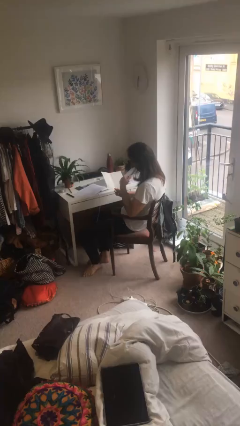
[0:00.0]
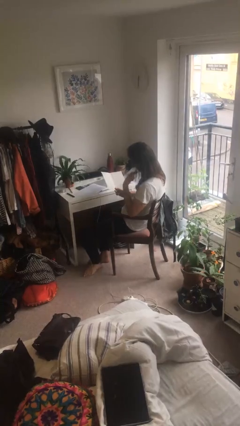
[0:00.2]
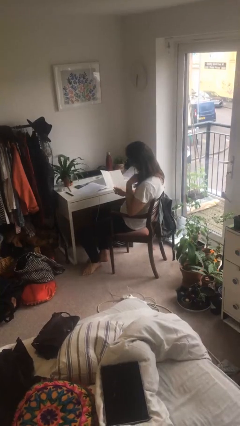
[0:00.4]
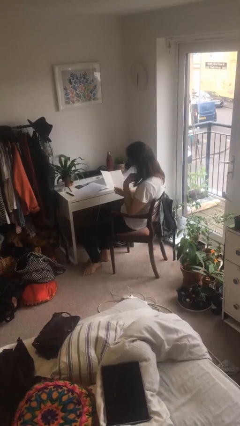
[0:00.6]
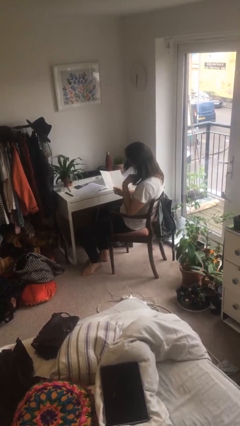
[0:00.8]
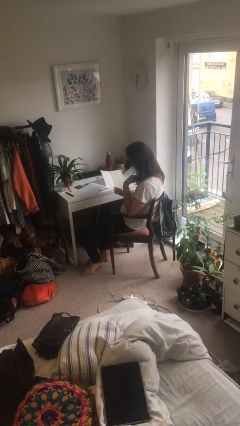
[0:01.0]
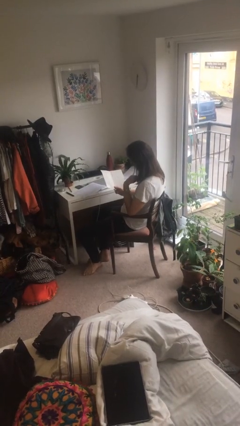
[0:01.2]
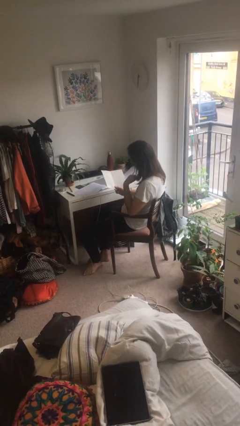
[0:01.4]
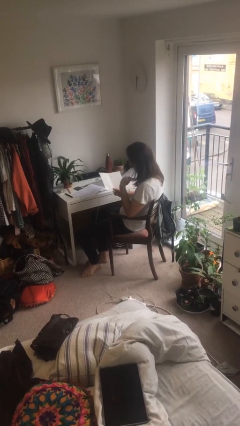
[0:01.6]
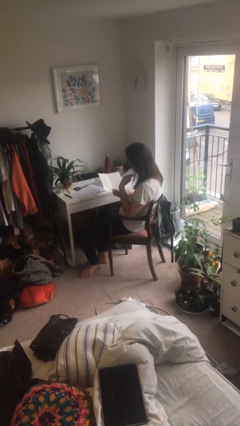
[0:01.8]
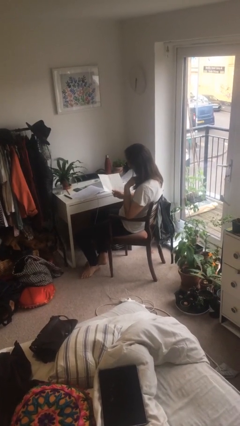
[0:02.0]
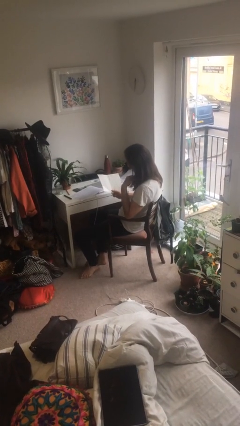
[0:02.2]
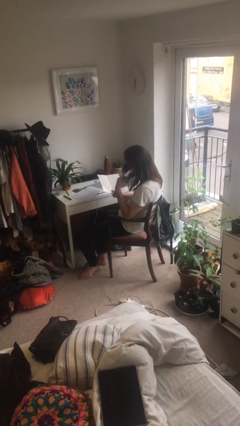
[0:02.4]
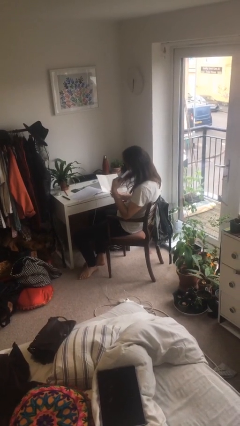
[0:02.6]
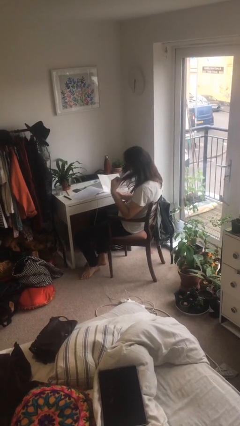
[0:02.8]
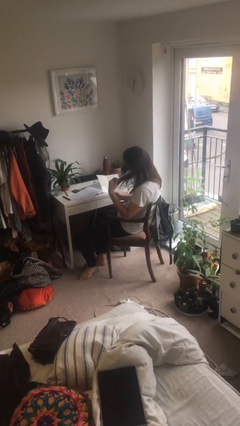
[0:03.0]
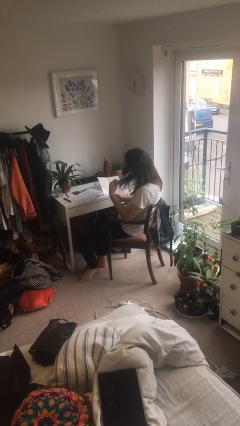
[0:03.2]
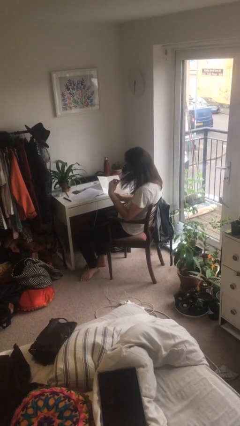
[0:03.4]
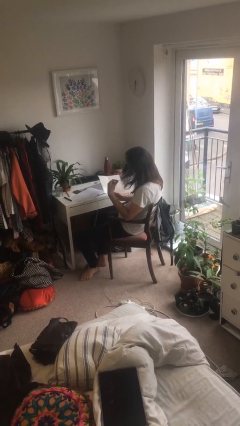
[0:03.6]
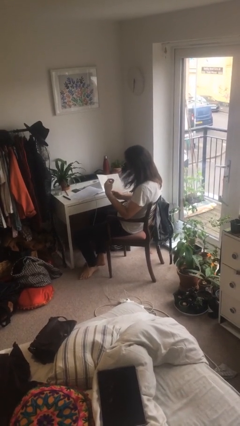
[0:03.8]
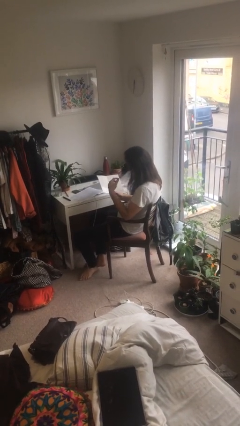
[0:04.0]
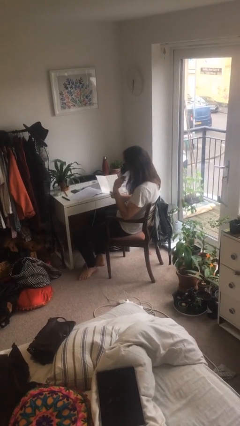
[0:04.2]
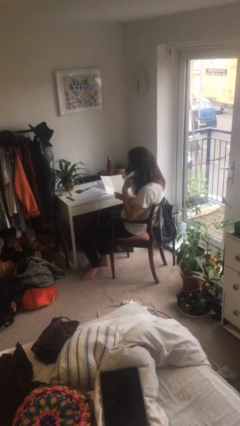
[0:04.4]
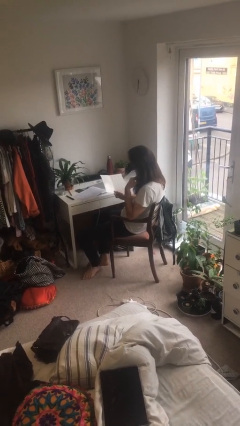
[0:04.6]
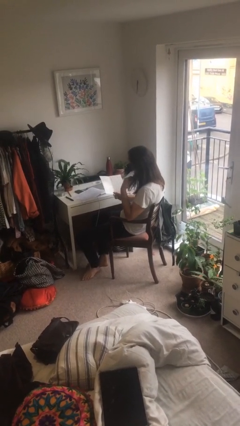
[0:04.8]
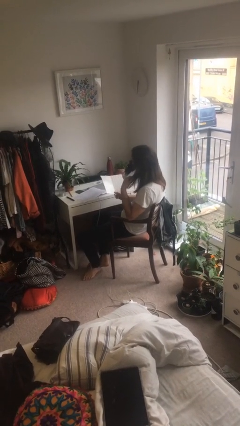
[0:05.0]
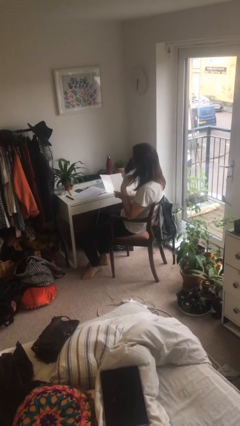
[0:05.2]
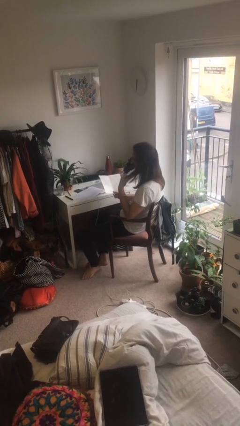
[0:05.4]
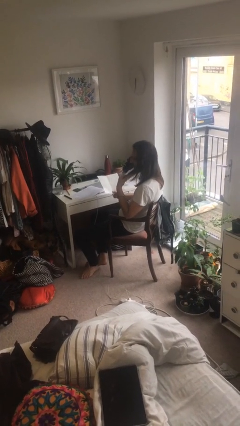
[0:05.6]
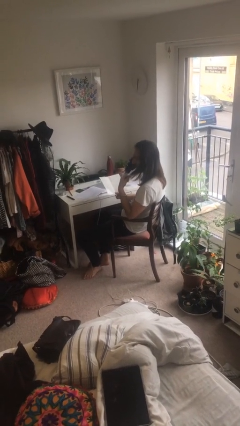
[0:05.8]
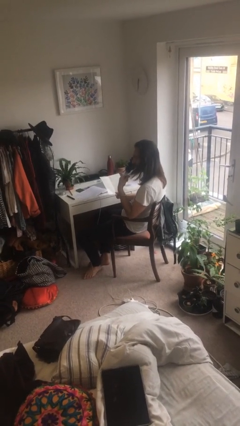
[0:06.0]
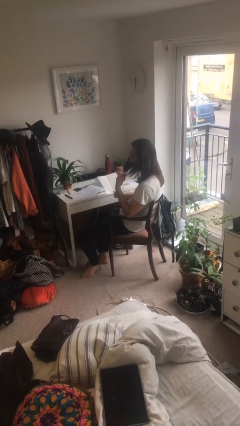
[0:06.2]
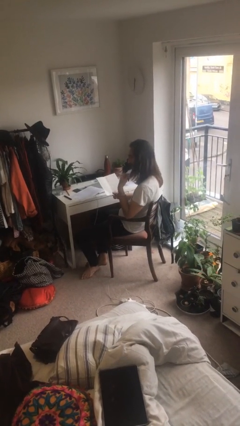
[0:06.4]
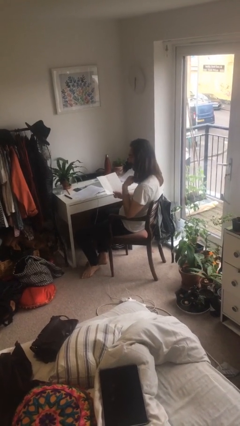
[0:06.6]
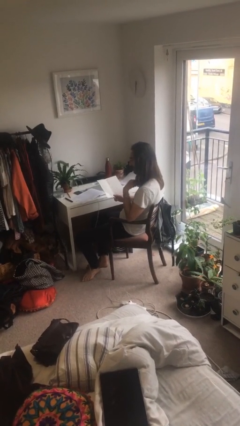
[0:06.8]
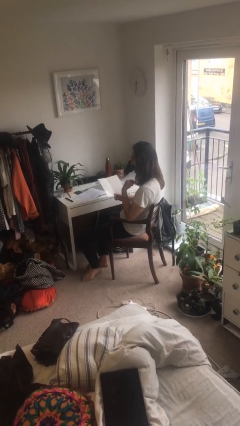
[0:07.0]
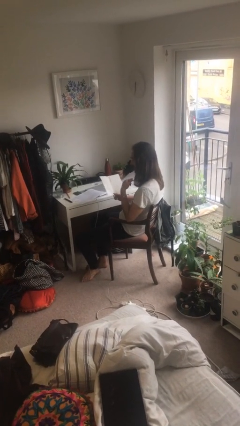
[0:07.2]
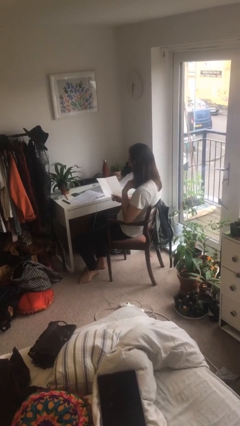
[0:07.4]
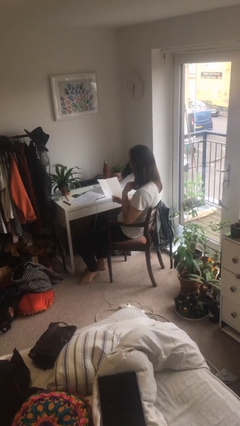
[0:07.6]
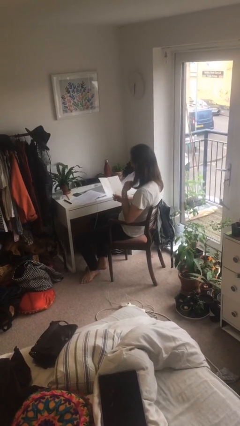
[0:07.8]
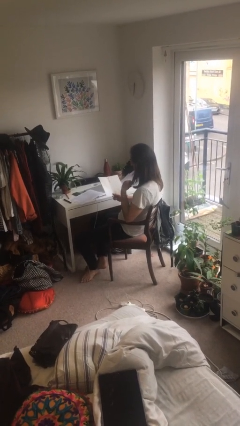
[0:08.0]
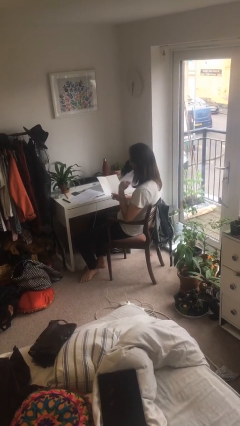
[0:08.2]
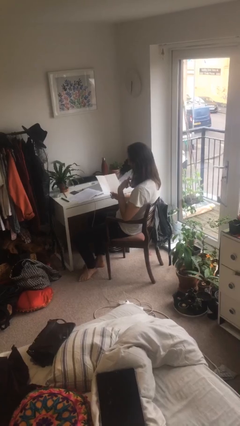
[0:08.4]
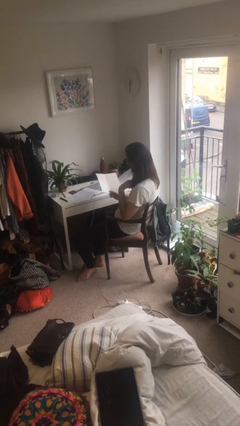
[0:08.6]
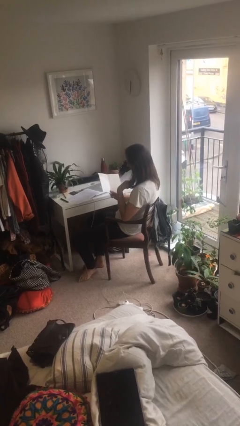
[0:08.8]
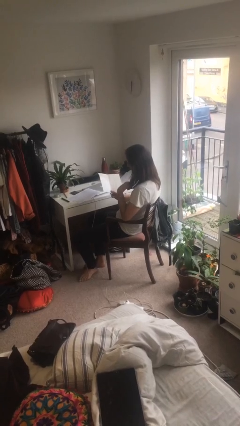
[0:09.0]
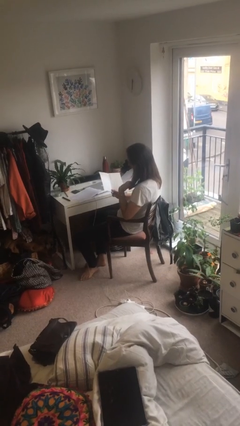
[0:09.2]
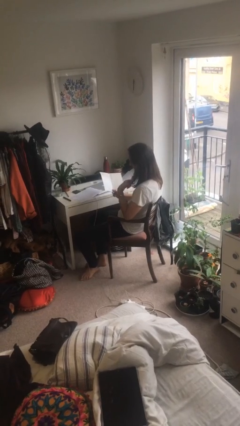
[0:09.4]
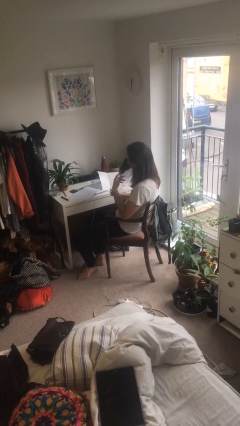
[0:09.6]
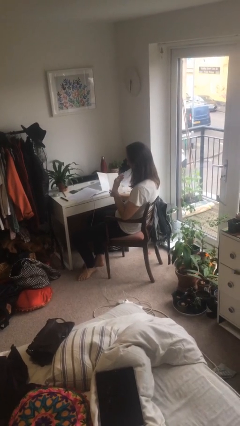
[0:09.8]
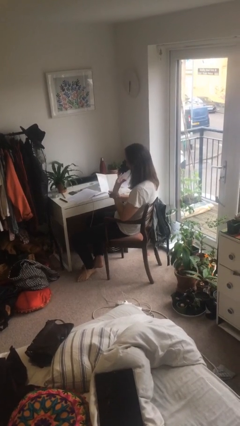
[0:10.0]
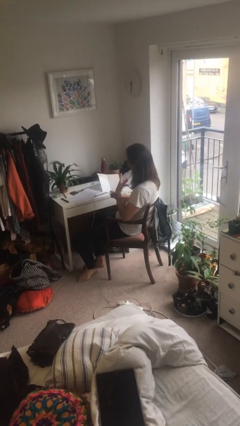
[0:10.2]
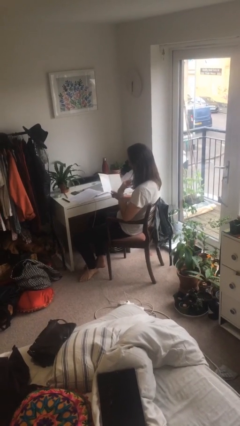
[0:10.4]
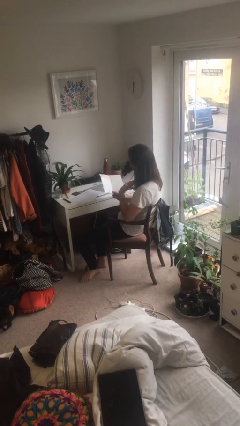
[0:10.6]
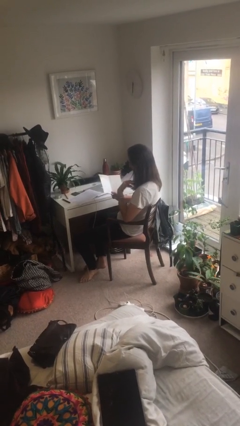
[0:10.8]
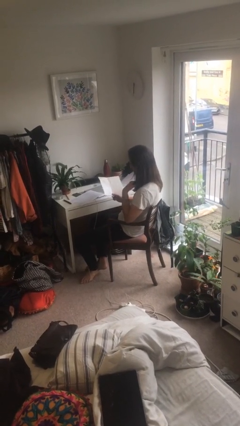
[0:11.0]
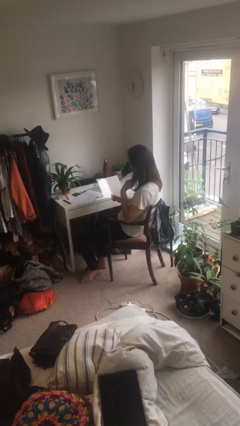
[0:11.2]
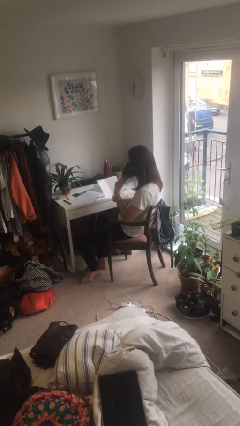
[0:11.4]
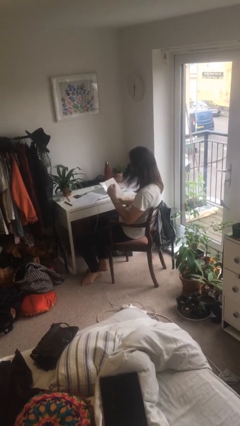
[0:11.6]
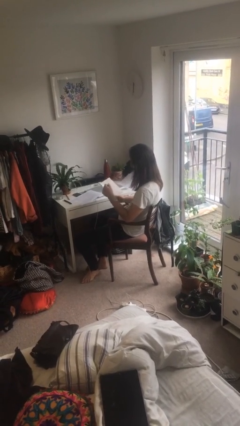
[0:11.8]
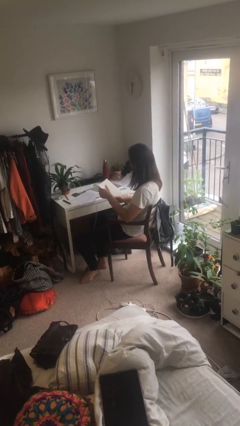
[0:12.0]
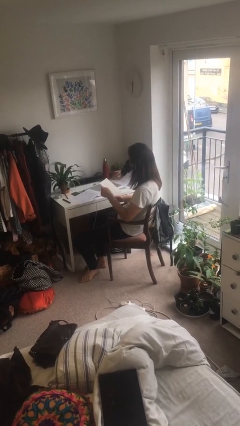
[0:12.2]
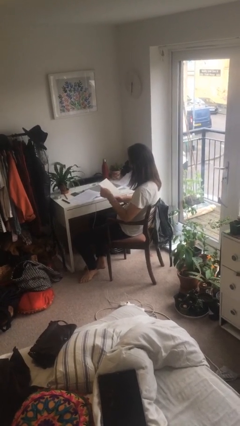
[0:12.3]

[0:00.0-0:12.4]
person reads document

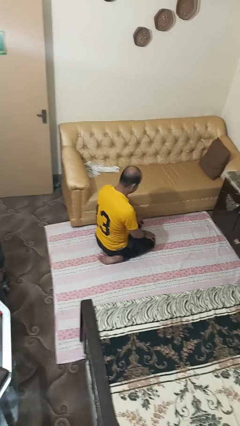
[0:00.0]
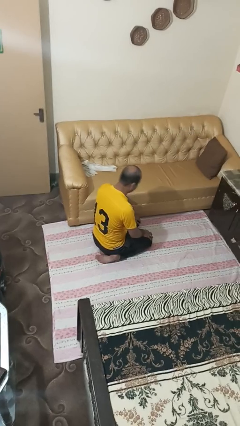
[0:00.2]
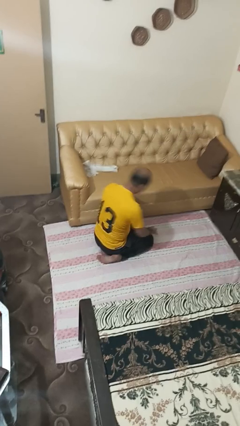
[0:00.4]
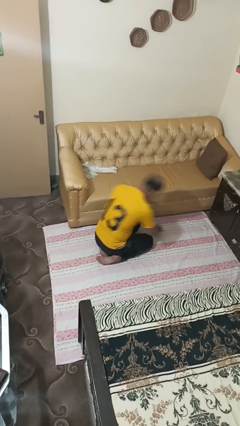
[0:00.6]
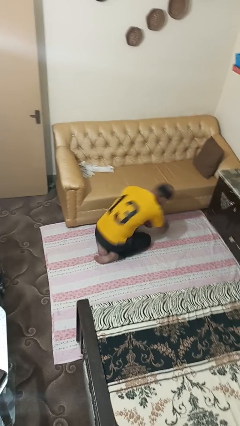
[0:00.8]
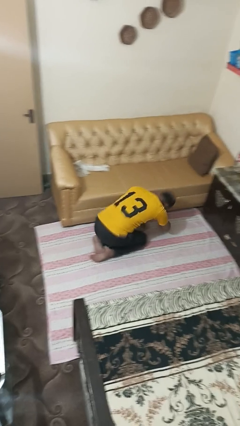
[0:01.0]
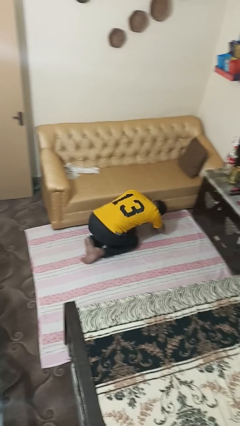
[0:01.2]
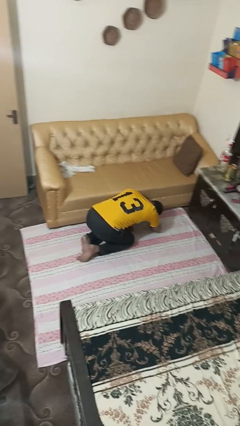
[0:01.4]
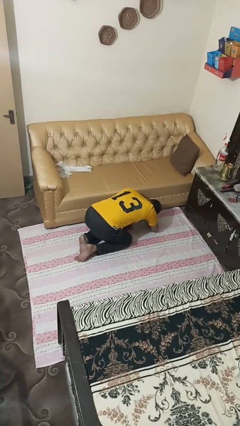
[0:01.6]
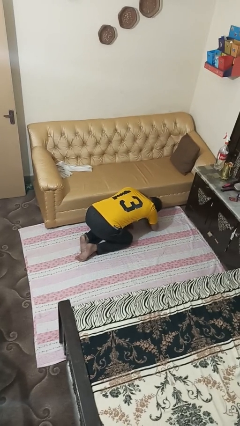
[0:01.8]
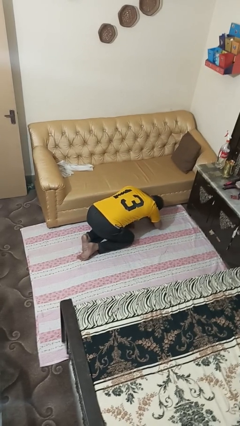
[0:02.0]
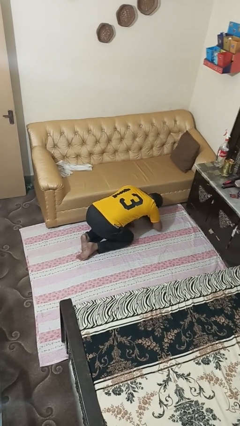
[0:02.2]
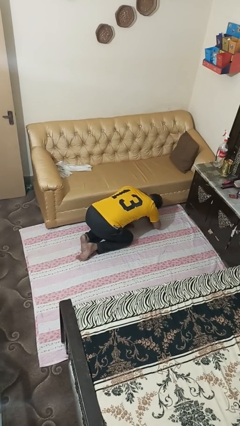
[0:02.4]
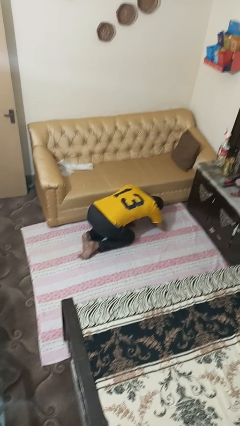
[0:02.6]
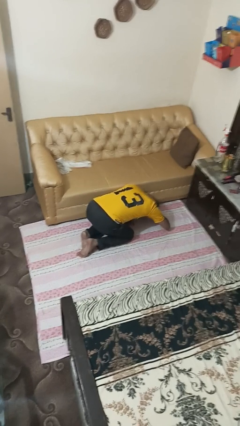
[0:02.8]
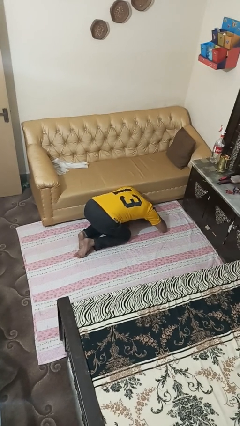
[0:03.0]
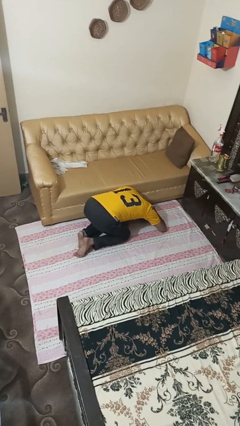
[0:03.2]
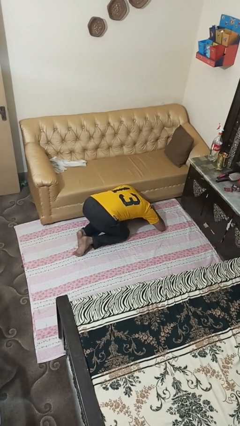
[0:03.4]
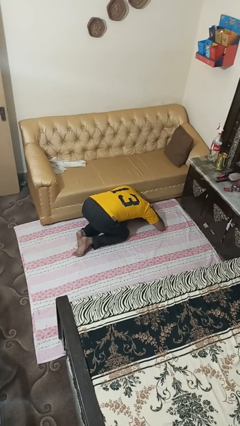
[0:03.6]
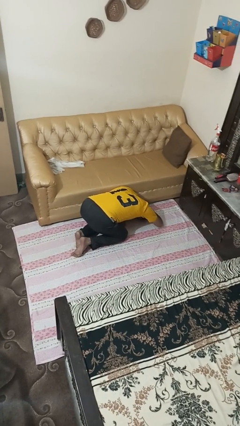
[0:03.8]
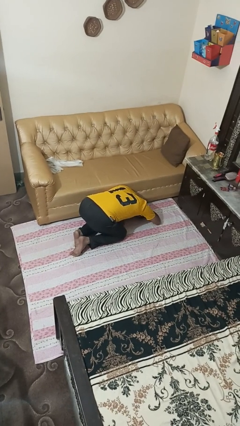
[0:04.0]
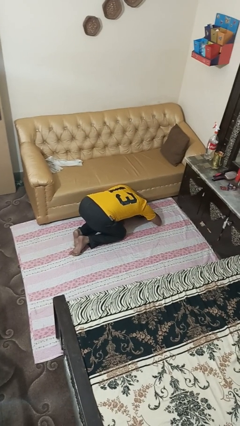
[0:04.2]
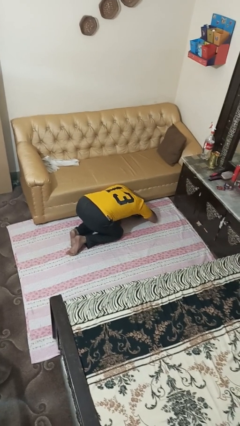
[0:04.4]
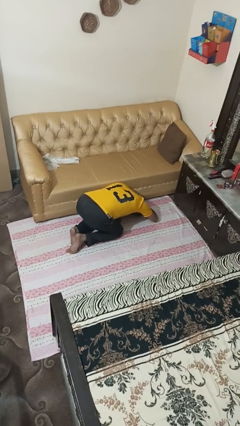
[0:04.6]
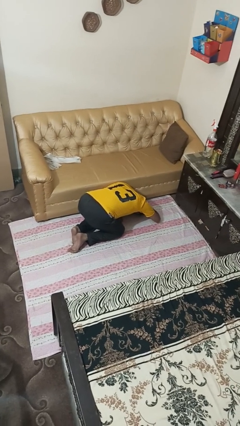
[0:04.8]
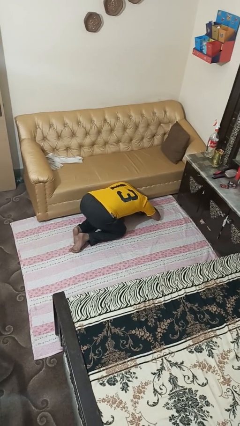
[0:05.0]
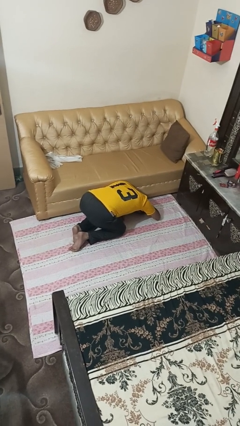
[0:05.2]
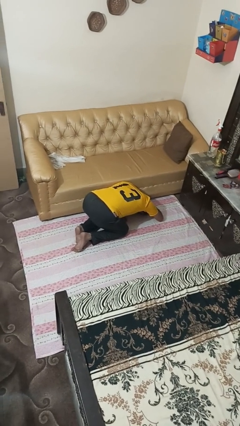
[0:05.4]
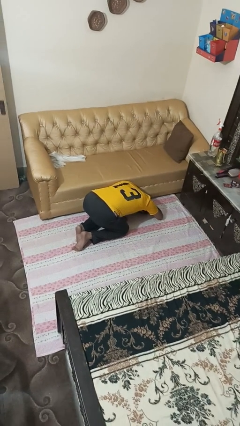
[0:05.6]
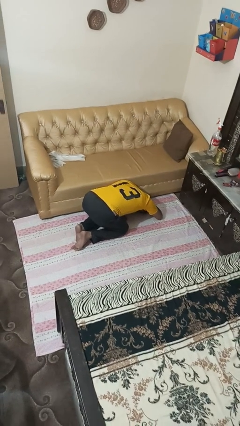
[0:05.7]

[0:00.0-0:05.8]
person searches under couch
